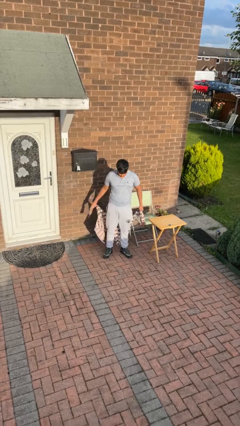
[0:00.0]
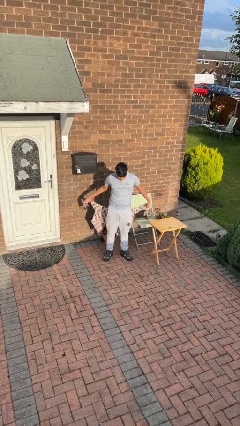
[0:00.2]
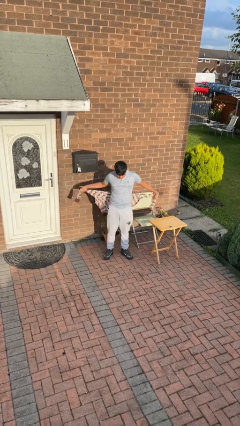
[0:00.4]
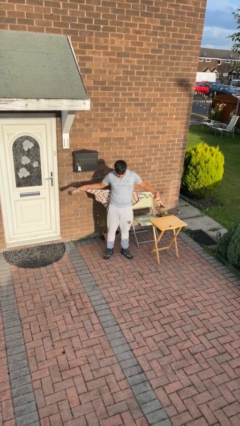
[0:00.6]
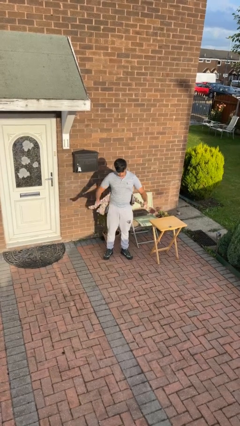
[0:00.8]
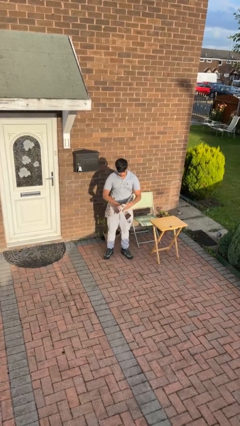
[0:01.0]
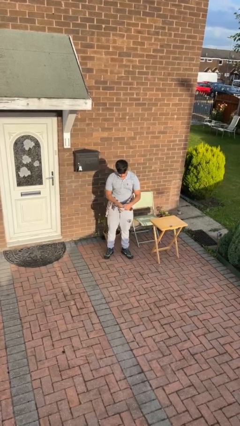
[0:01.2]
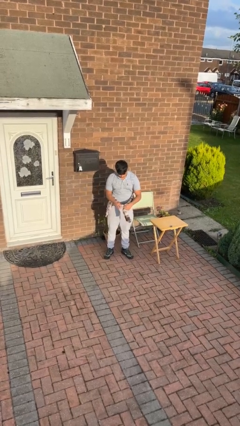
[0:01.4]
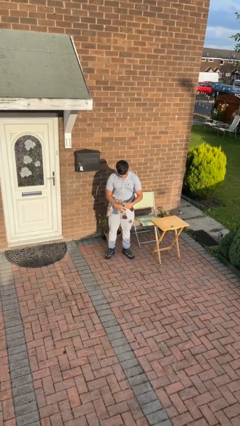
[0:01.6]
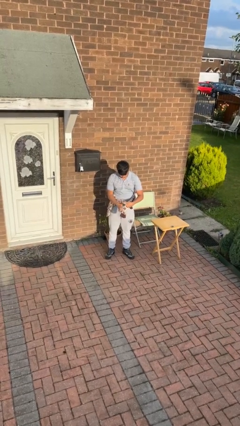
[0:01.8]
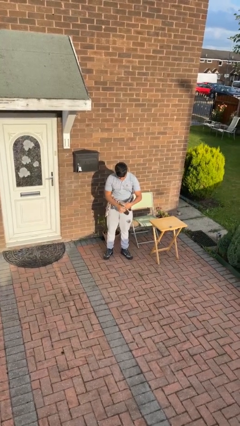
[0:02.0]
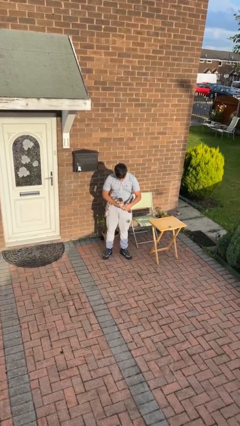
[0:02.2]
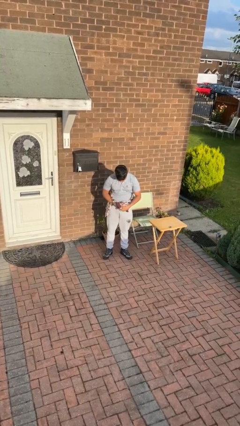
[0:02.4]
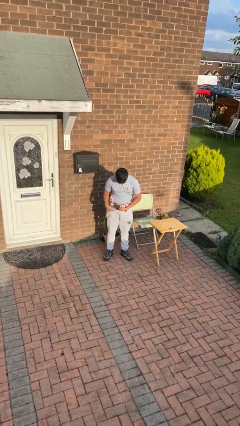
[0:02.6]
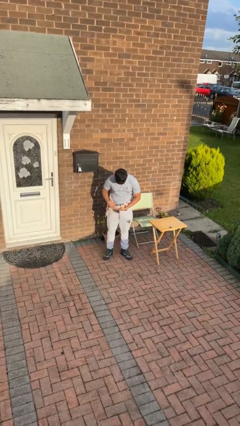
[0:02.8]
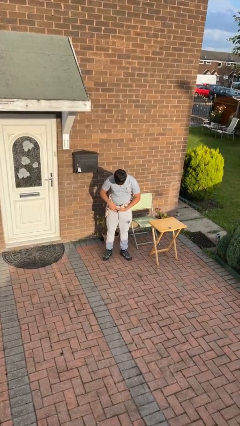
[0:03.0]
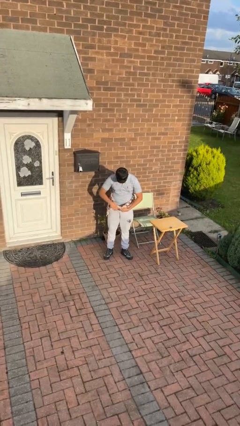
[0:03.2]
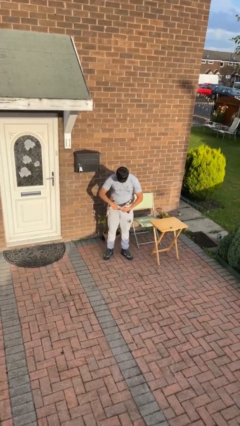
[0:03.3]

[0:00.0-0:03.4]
person ties jacket around waist

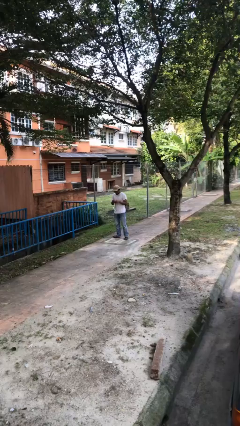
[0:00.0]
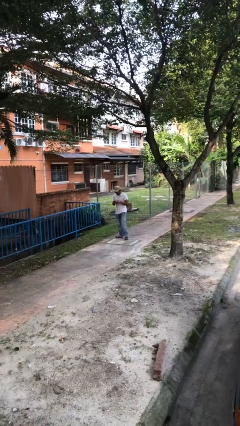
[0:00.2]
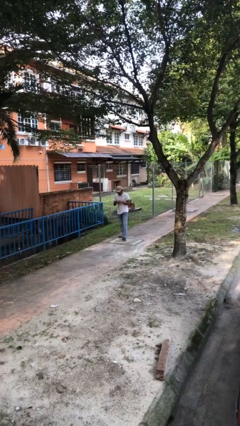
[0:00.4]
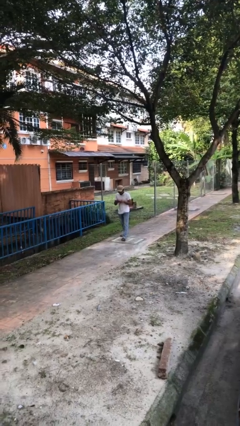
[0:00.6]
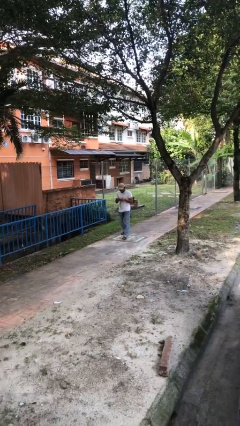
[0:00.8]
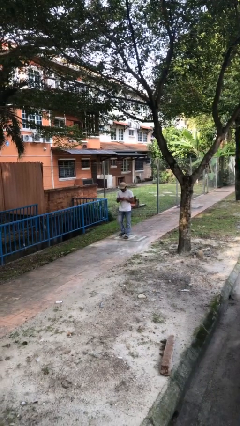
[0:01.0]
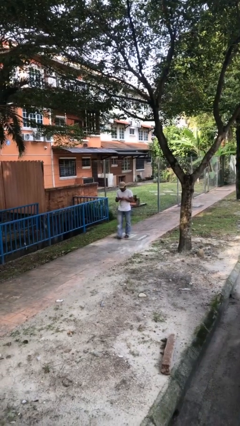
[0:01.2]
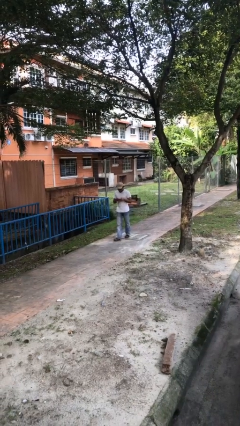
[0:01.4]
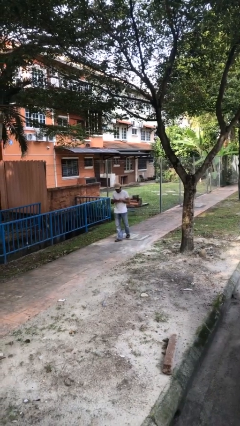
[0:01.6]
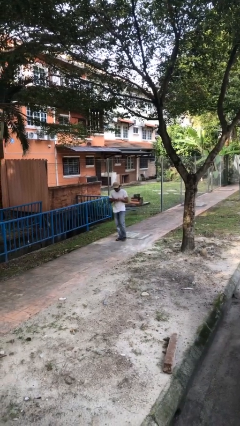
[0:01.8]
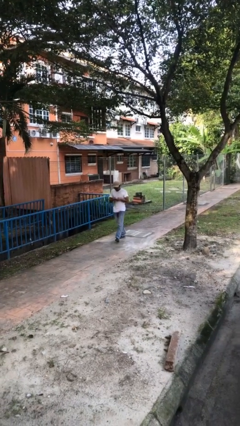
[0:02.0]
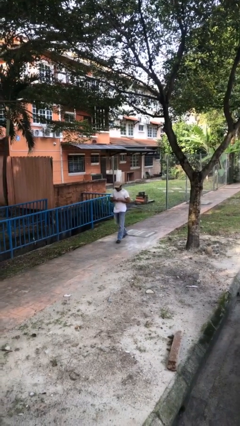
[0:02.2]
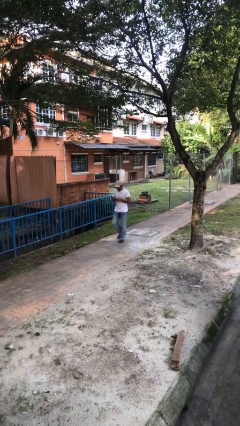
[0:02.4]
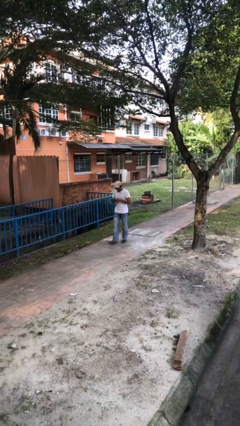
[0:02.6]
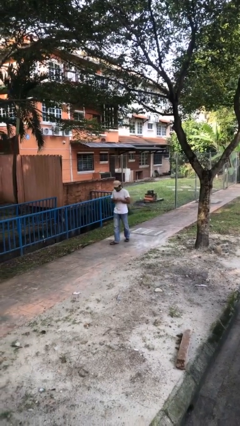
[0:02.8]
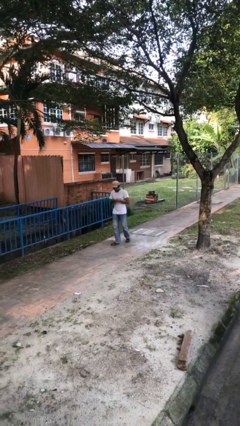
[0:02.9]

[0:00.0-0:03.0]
person texts on phone

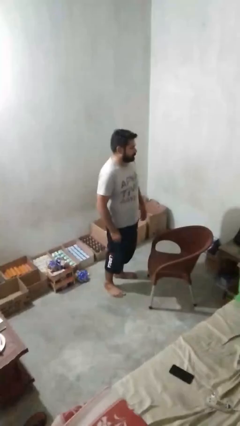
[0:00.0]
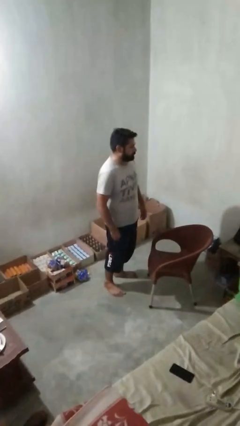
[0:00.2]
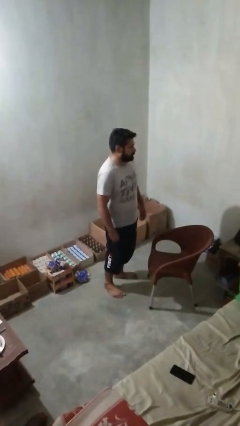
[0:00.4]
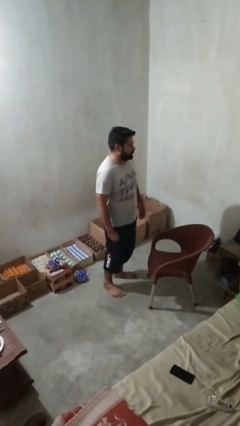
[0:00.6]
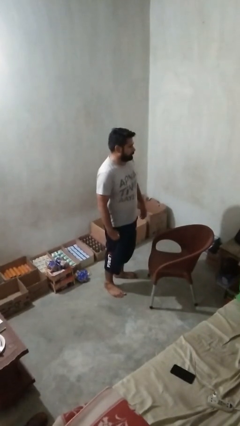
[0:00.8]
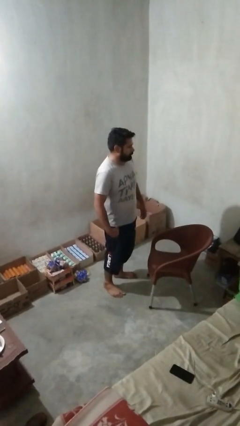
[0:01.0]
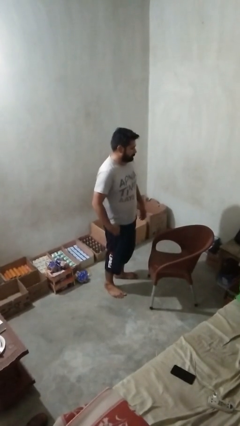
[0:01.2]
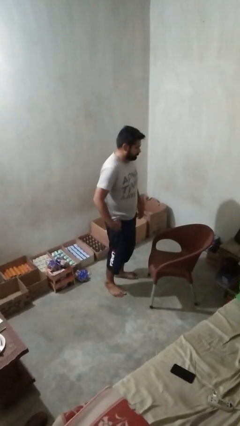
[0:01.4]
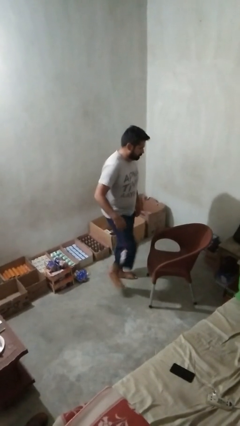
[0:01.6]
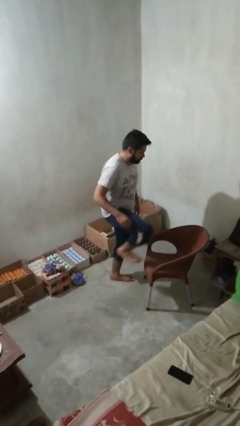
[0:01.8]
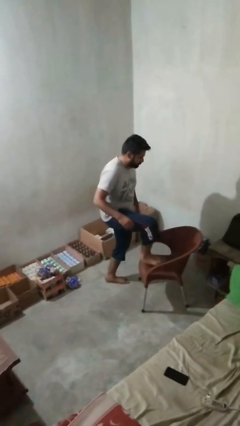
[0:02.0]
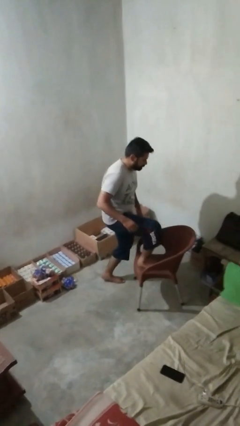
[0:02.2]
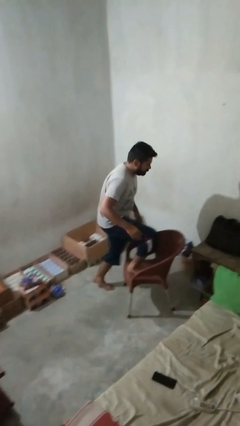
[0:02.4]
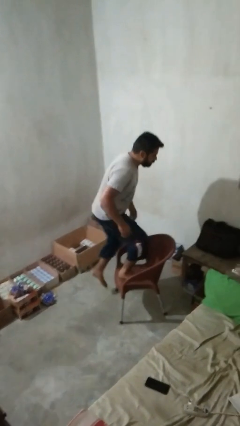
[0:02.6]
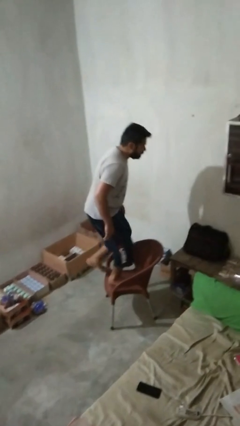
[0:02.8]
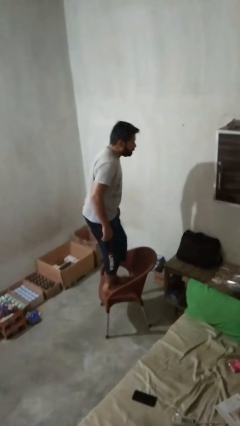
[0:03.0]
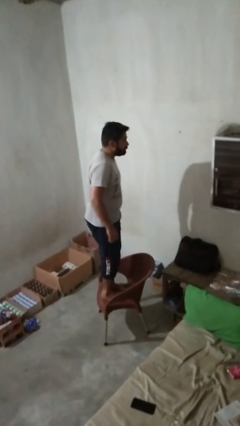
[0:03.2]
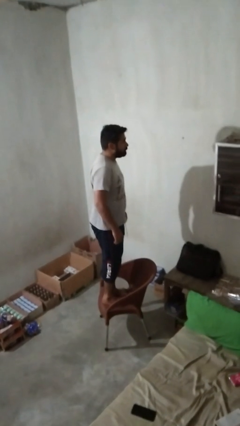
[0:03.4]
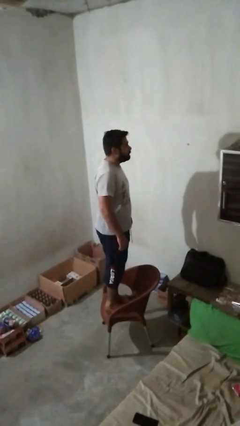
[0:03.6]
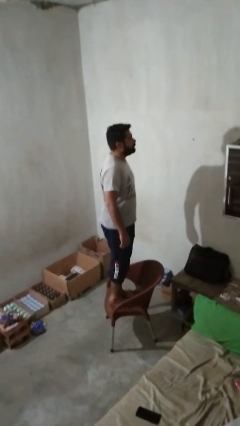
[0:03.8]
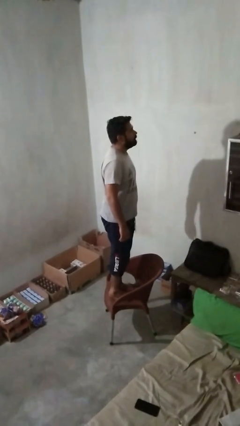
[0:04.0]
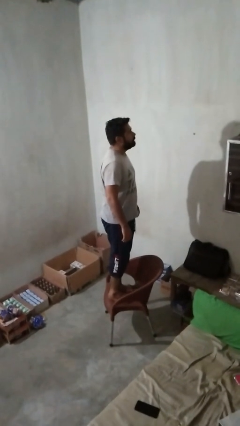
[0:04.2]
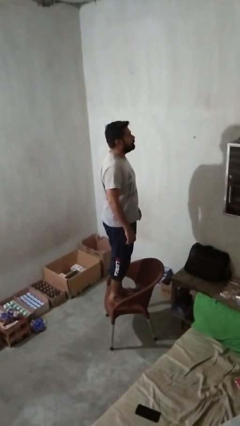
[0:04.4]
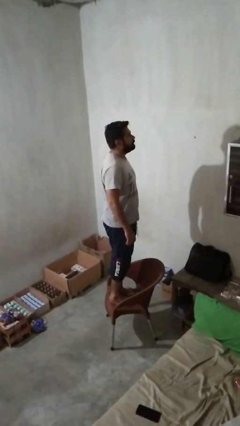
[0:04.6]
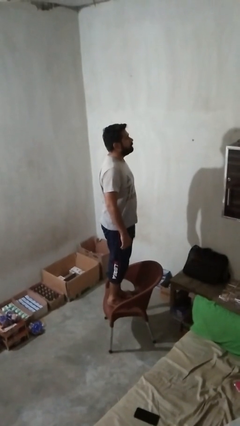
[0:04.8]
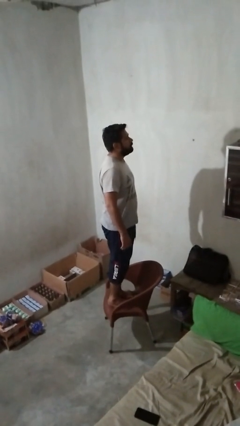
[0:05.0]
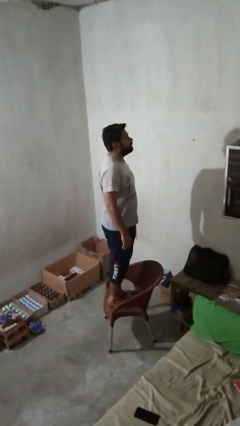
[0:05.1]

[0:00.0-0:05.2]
person climbs on chair

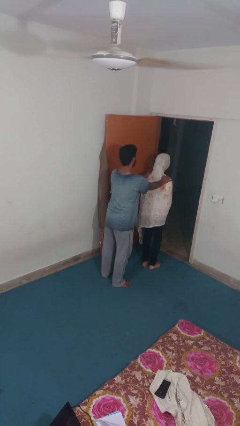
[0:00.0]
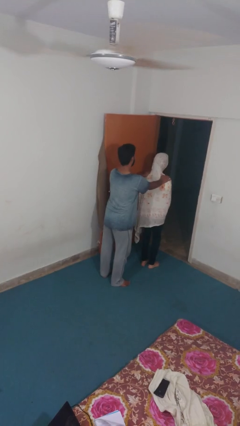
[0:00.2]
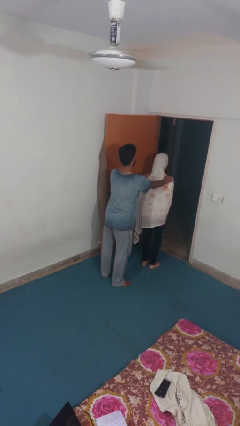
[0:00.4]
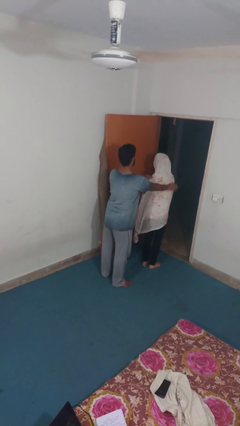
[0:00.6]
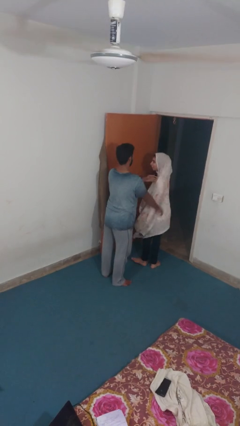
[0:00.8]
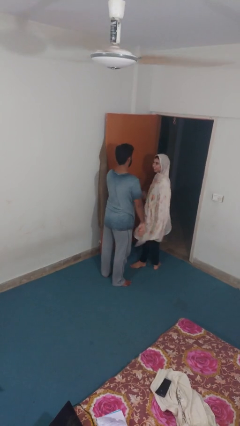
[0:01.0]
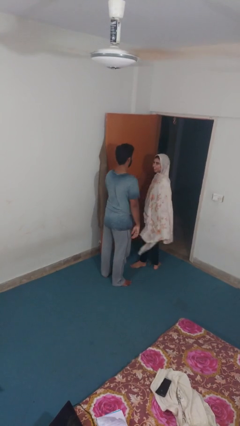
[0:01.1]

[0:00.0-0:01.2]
person spins person around

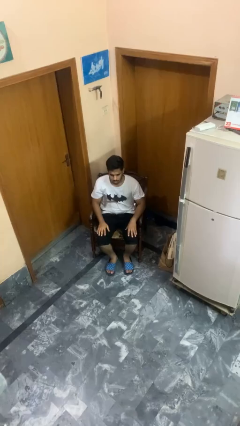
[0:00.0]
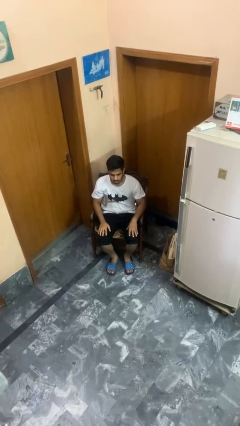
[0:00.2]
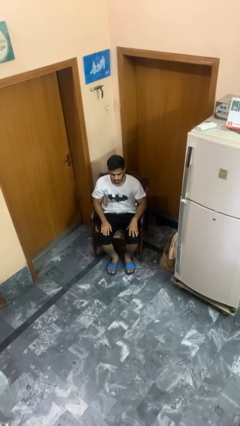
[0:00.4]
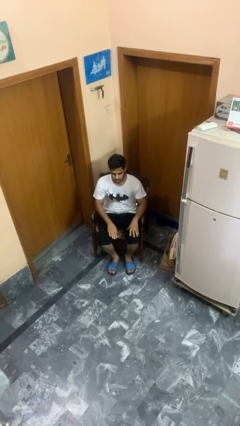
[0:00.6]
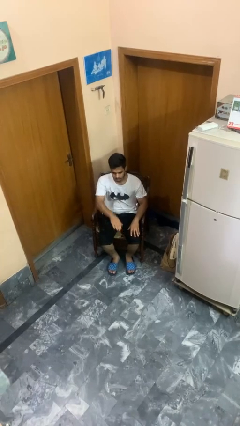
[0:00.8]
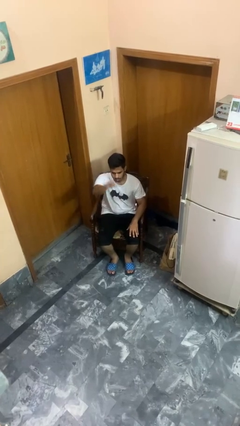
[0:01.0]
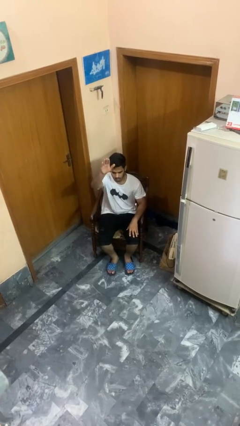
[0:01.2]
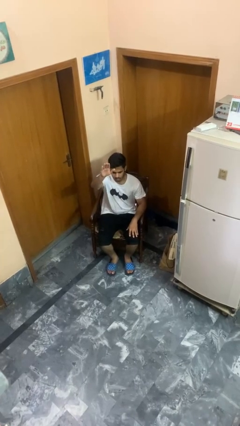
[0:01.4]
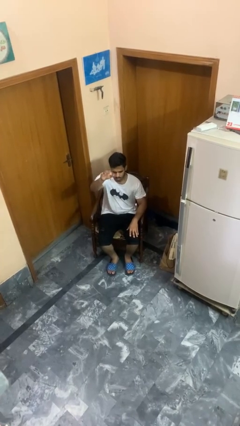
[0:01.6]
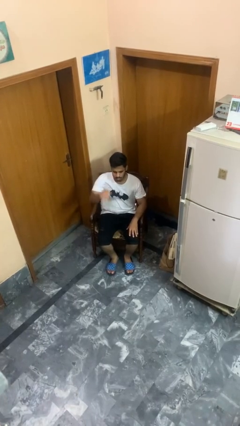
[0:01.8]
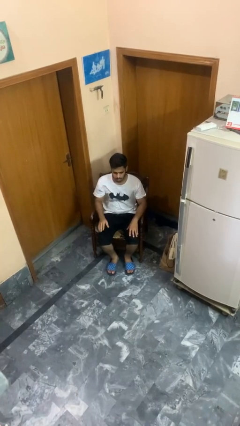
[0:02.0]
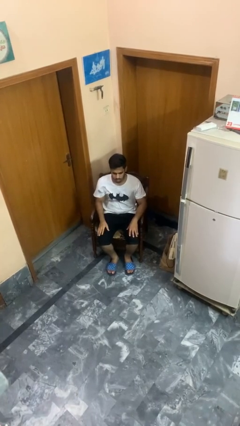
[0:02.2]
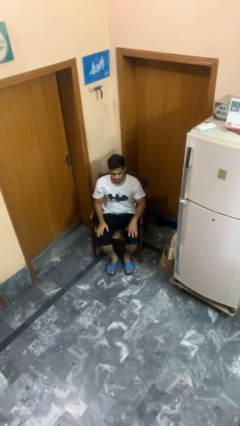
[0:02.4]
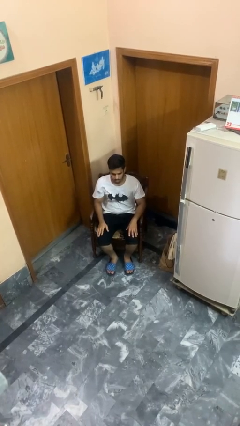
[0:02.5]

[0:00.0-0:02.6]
person gestures swipe up

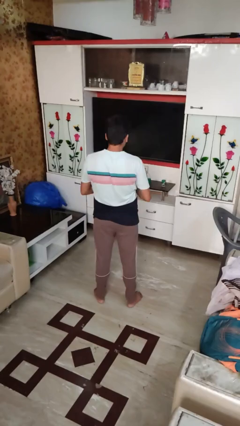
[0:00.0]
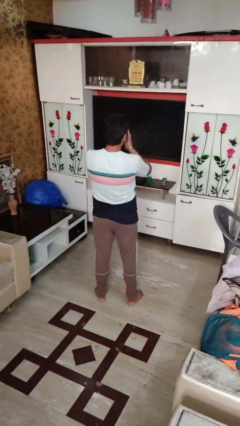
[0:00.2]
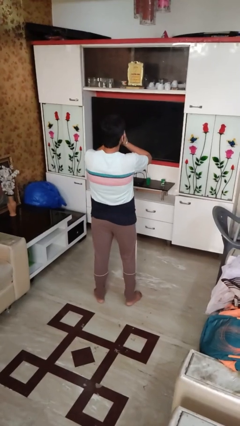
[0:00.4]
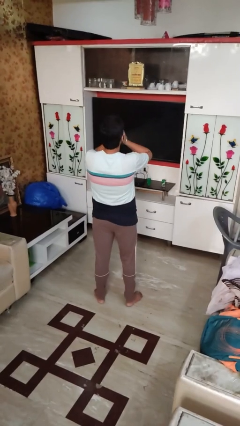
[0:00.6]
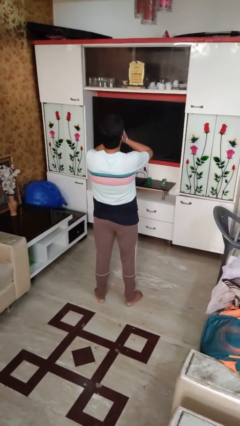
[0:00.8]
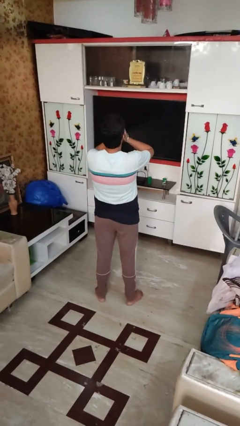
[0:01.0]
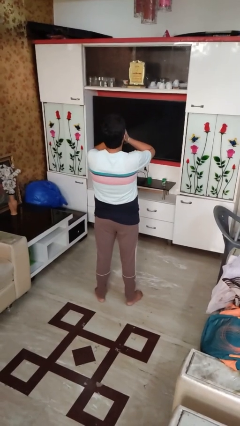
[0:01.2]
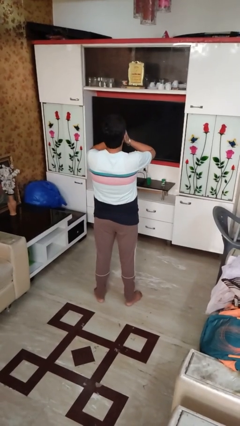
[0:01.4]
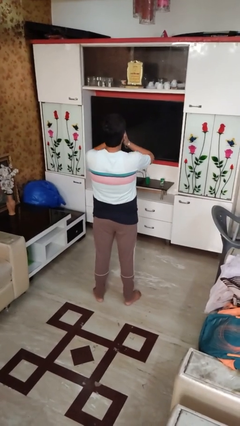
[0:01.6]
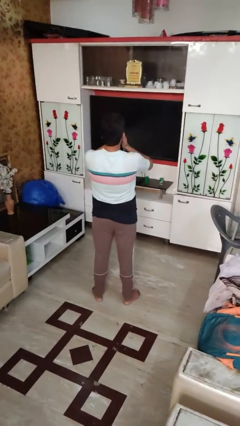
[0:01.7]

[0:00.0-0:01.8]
person covers face with hands
